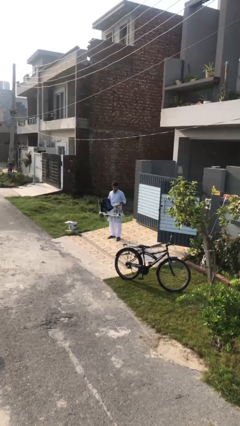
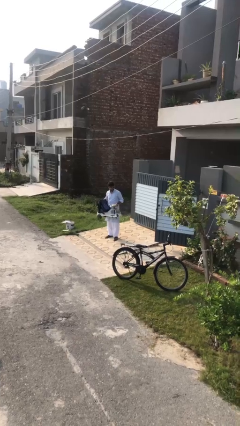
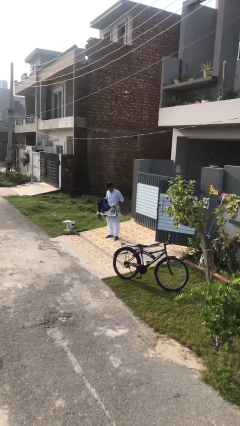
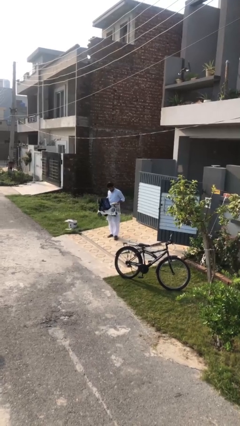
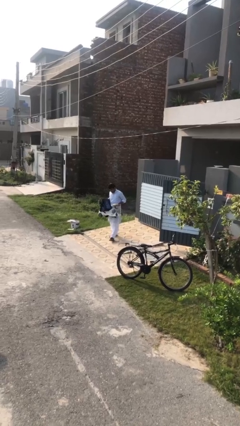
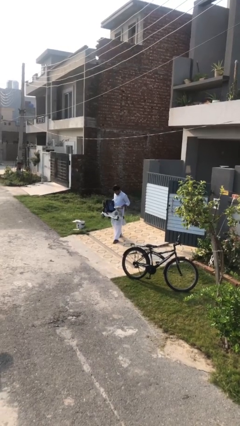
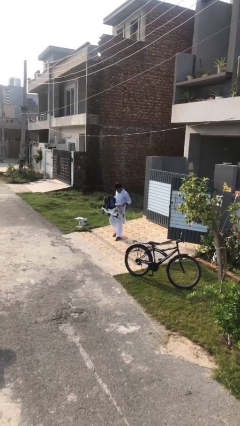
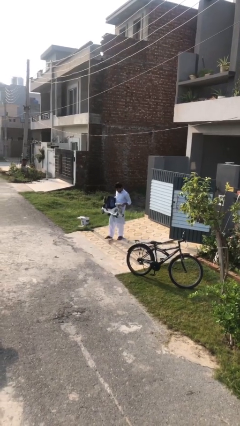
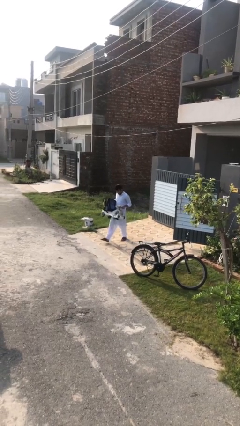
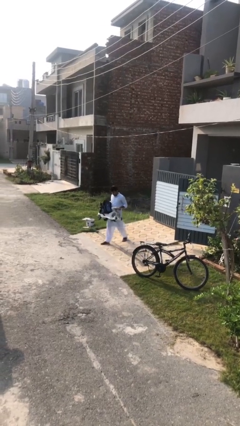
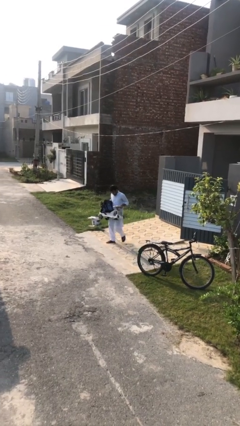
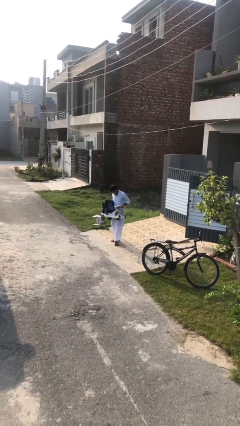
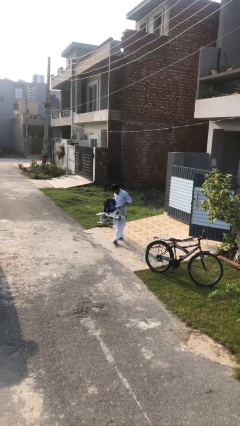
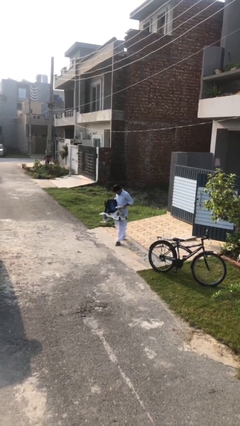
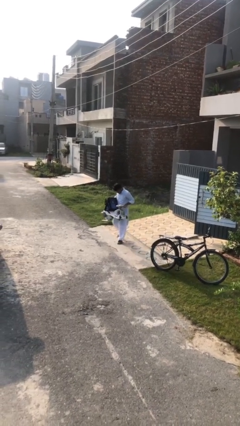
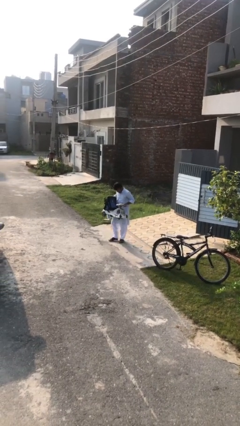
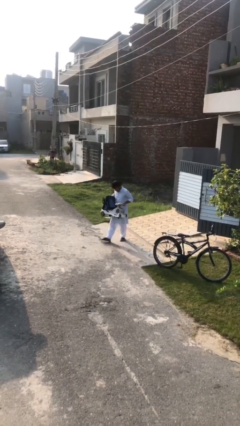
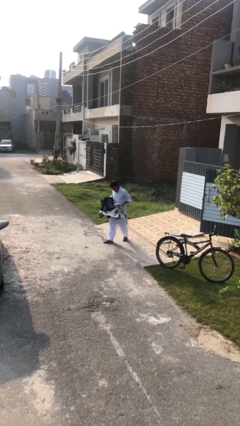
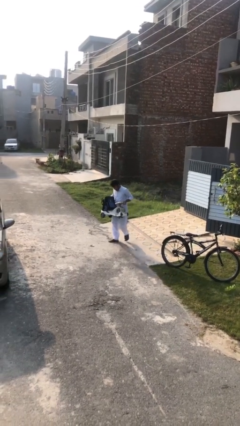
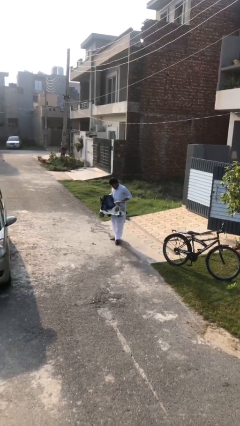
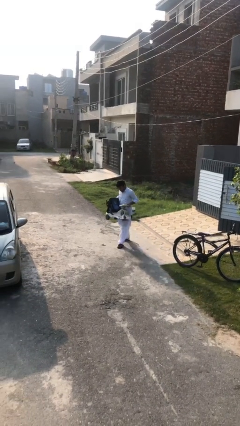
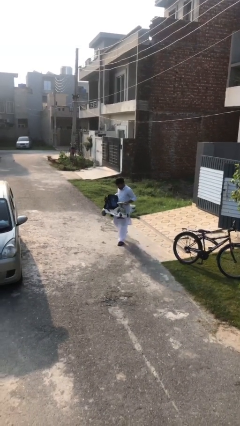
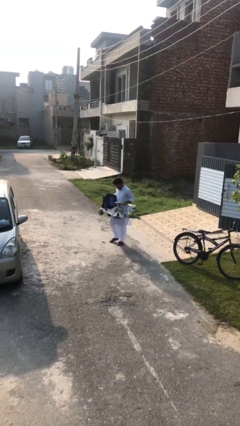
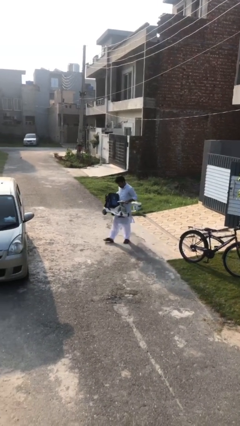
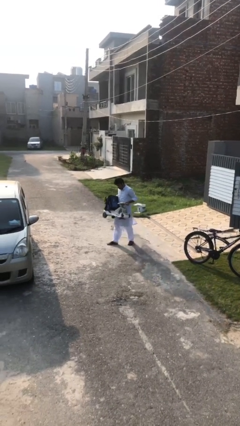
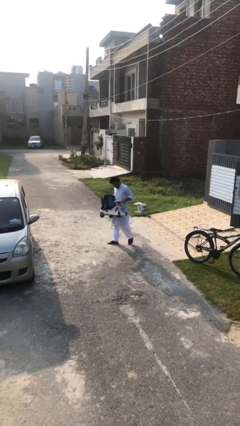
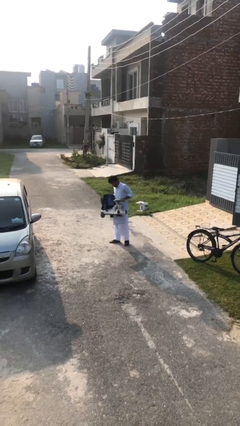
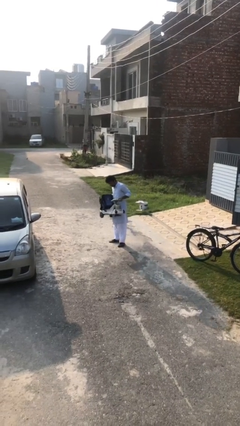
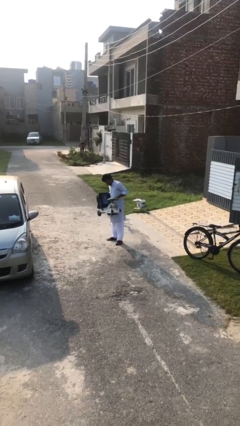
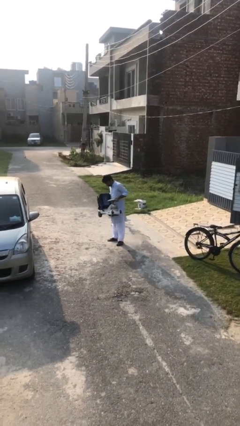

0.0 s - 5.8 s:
person carries heavy object

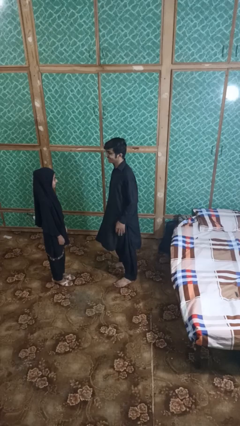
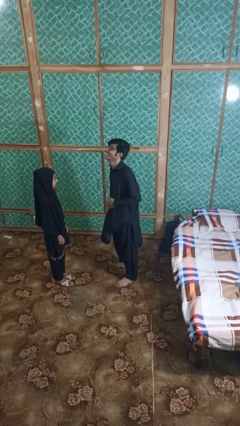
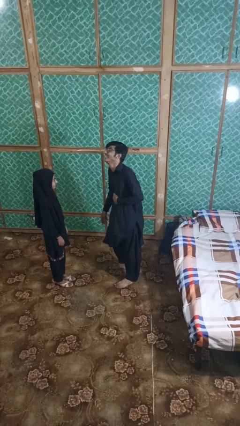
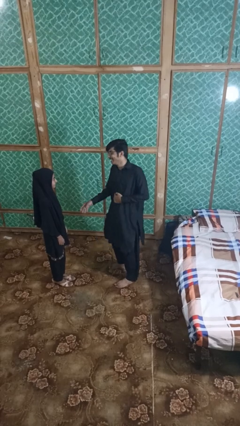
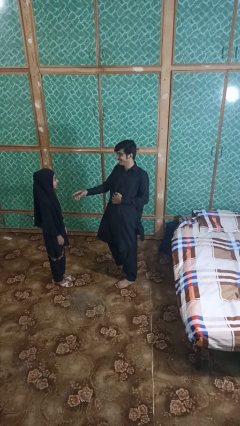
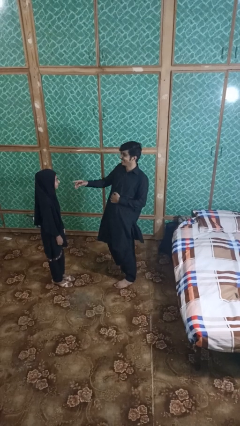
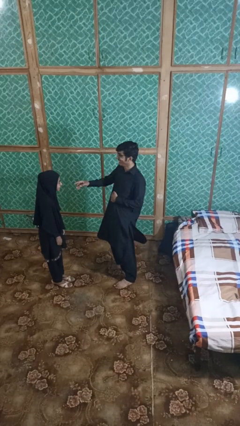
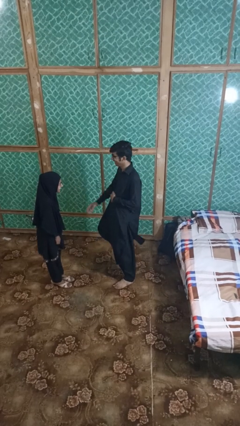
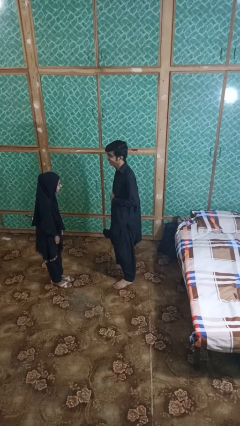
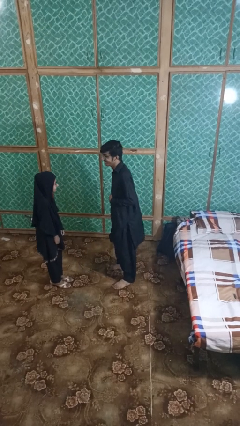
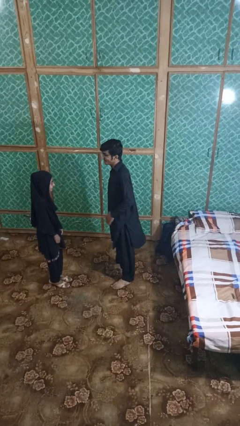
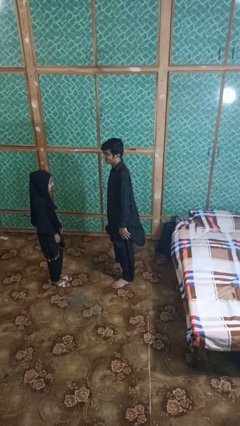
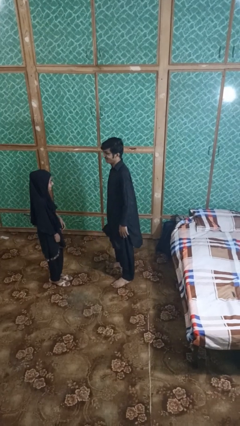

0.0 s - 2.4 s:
person laughs with person

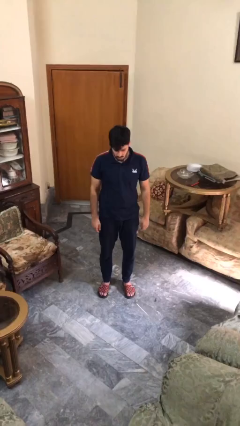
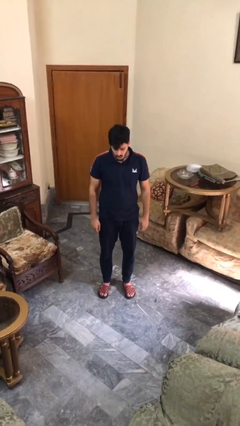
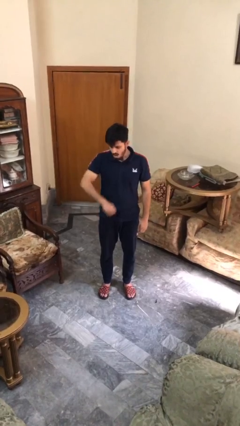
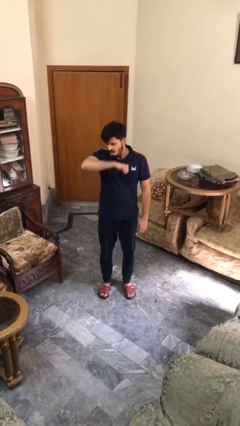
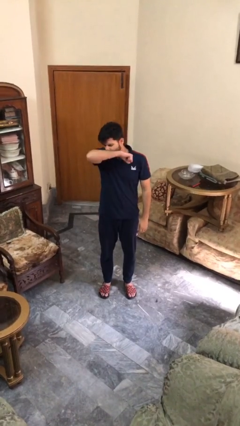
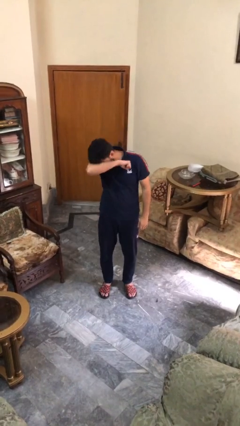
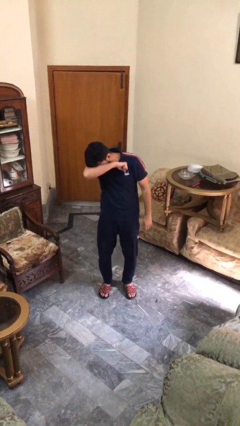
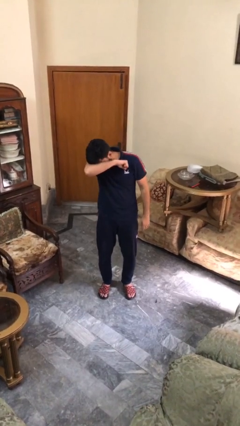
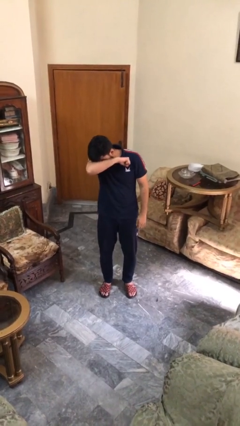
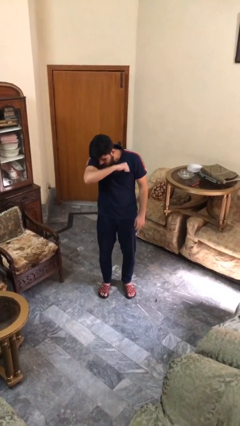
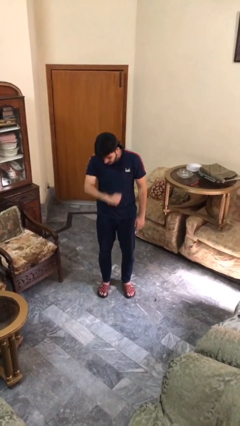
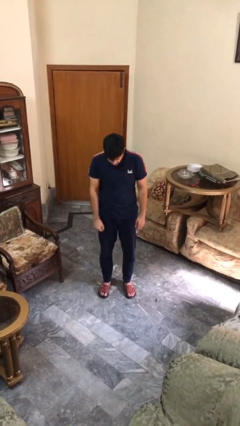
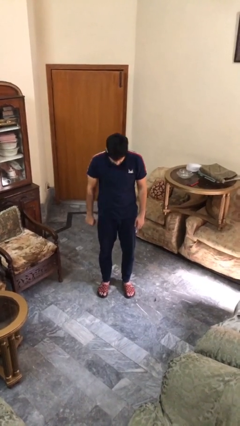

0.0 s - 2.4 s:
person sneezes into arm

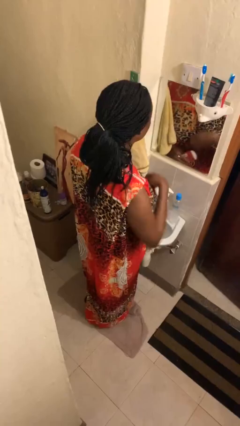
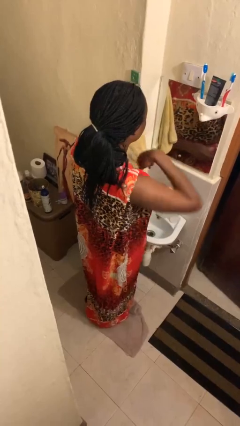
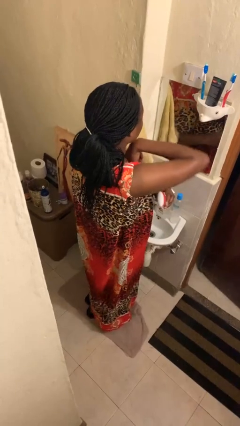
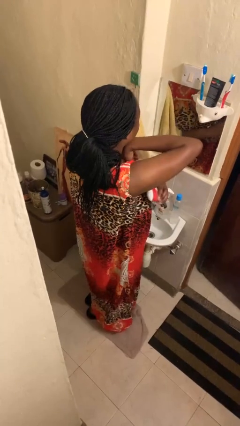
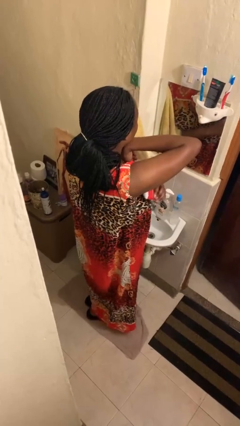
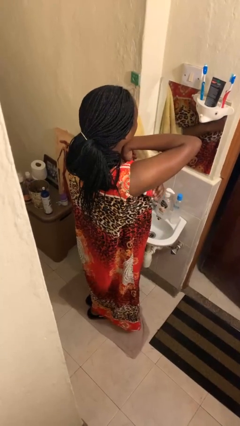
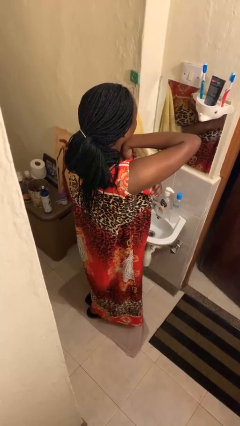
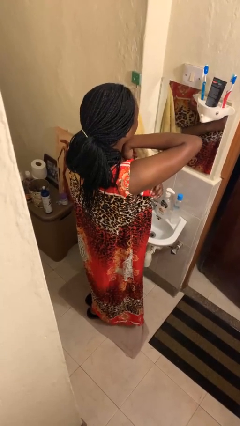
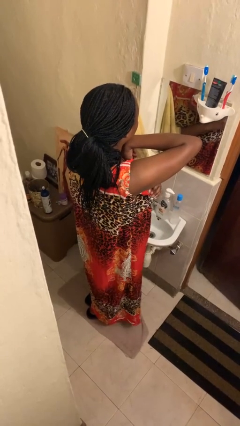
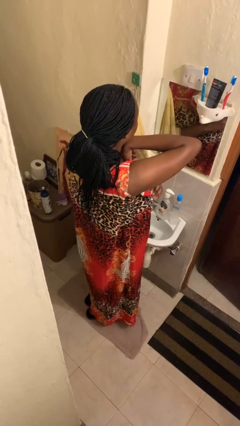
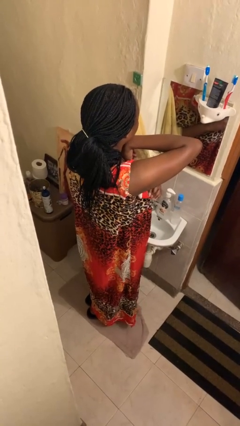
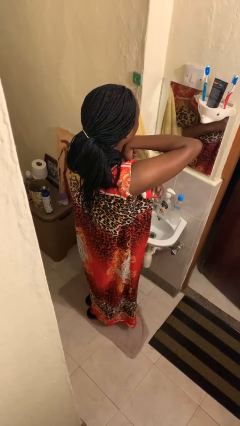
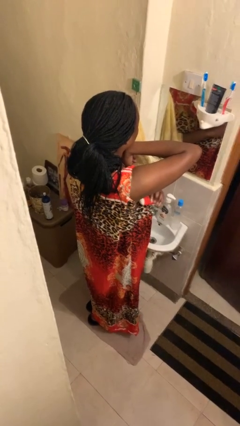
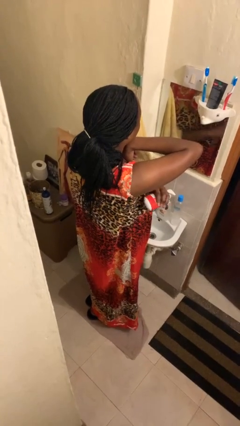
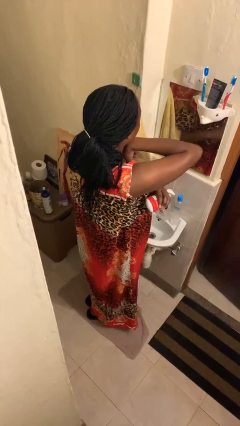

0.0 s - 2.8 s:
person applies deodorant

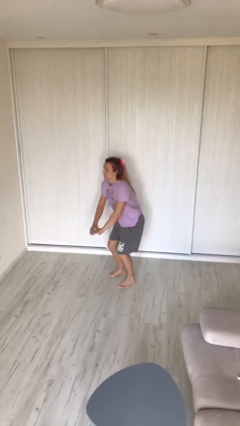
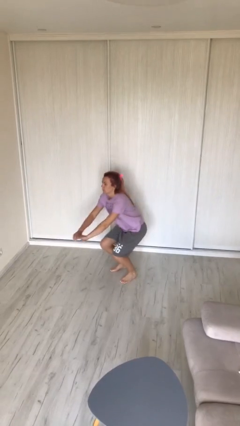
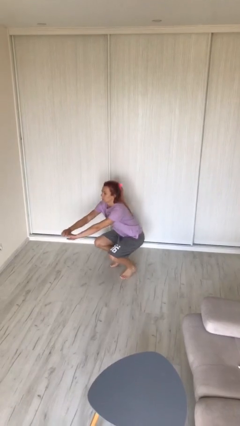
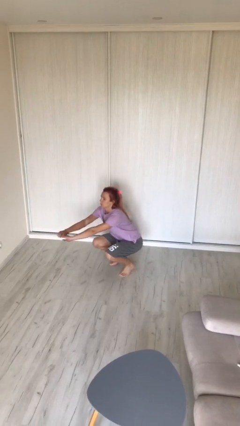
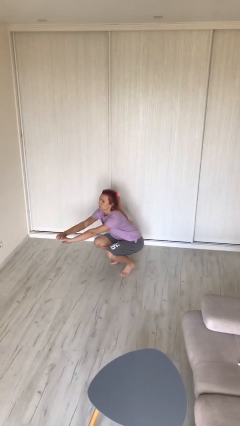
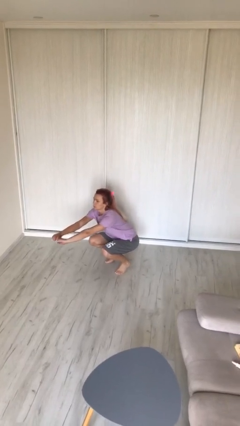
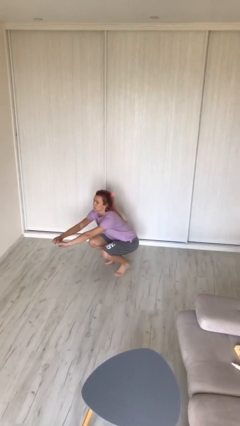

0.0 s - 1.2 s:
person squats

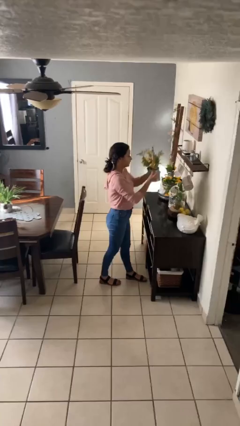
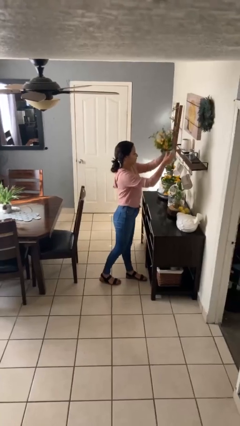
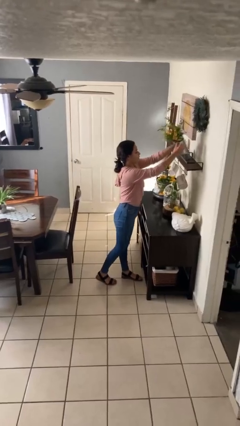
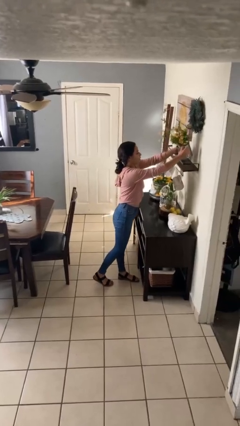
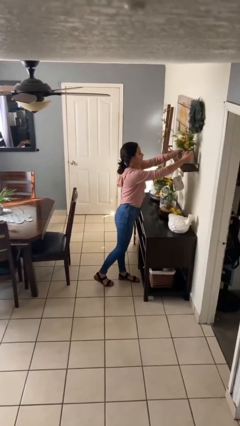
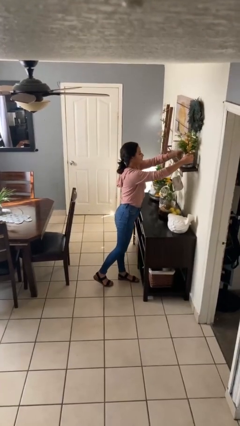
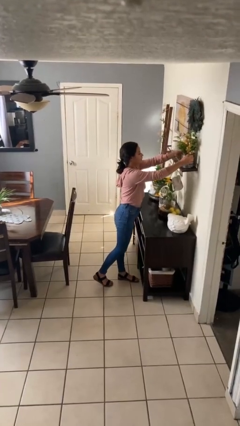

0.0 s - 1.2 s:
person puts down object on countertop

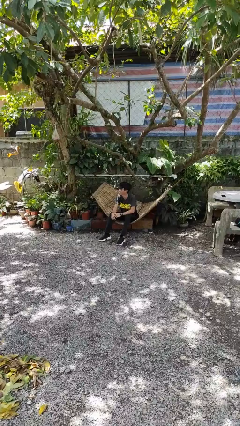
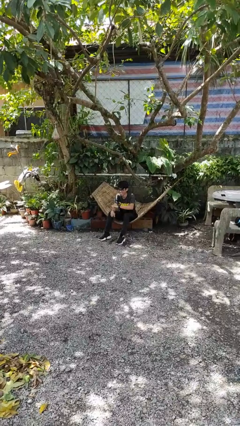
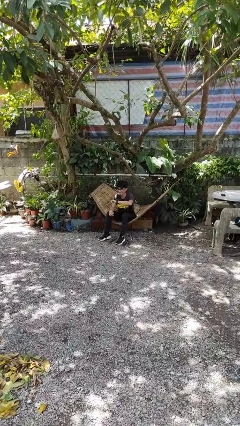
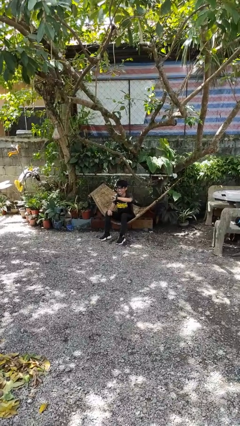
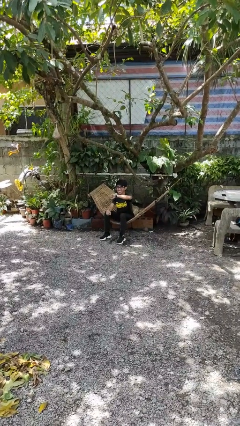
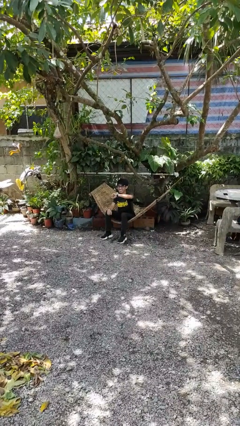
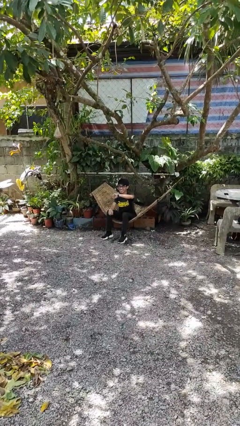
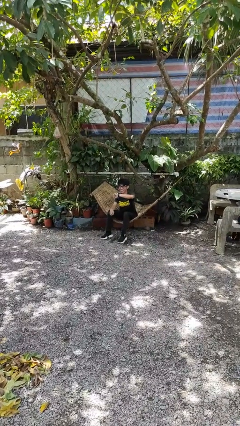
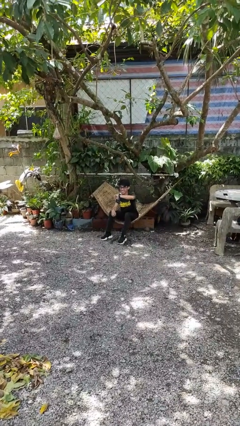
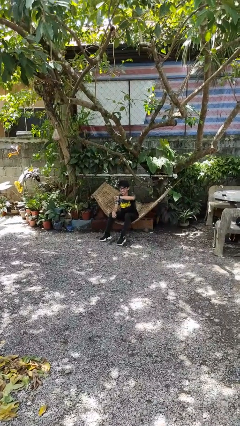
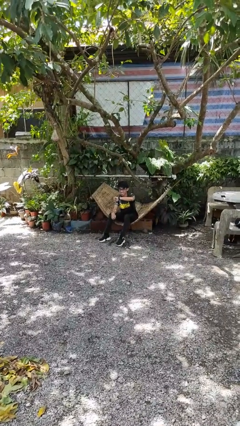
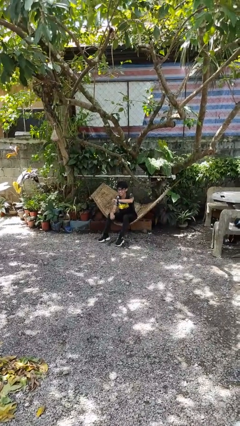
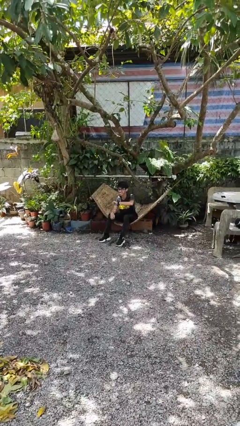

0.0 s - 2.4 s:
person looks at wristwatch
